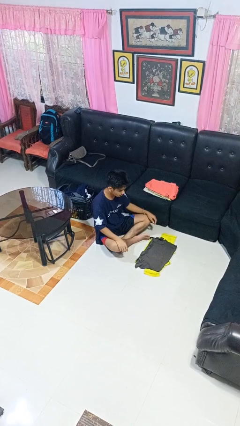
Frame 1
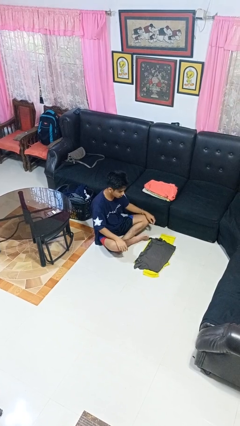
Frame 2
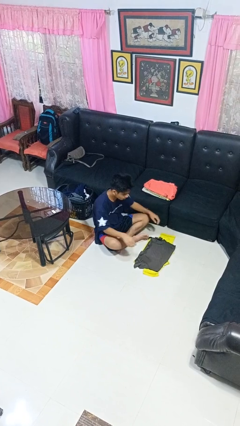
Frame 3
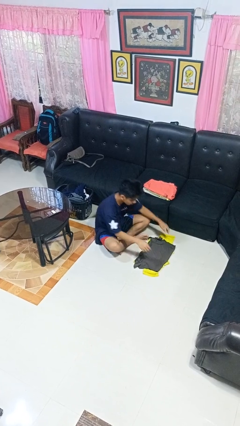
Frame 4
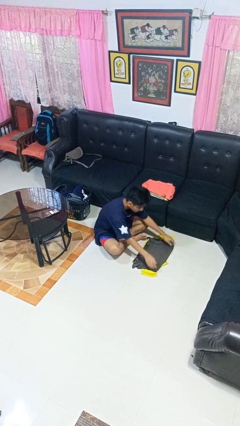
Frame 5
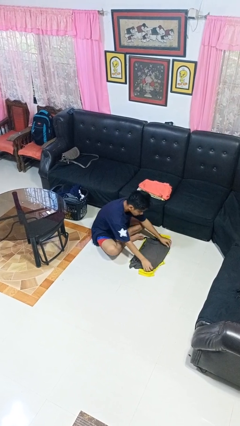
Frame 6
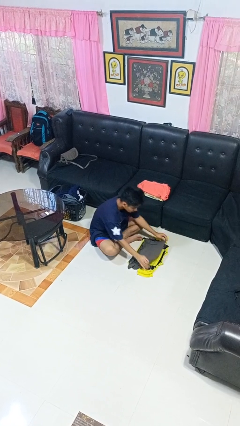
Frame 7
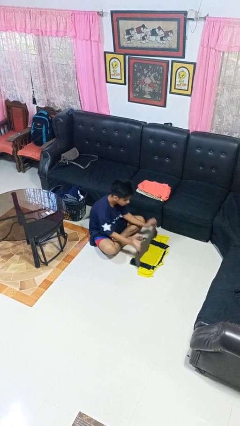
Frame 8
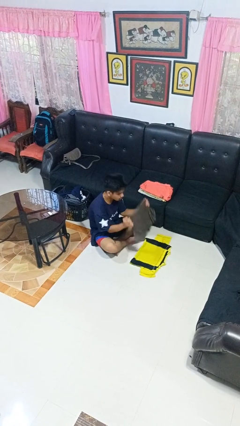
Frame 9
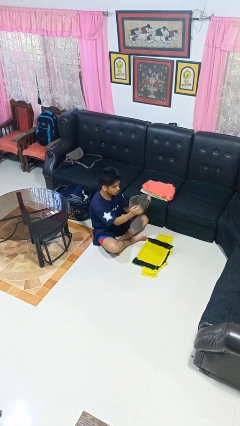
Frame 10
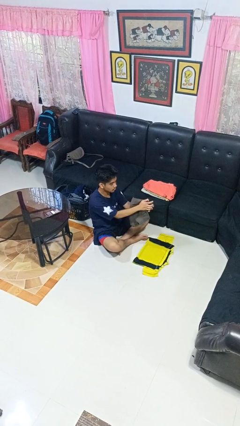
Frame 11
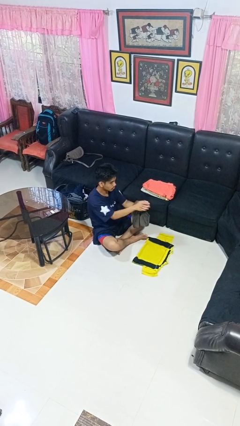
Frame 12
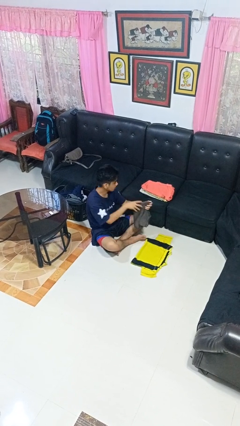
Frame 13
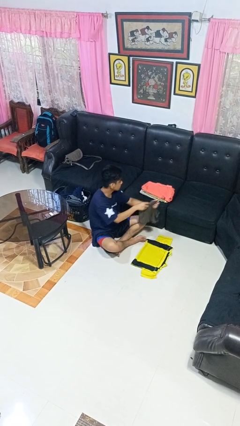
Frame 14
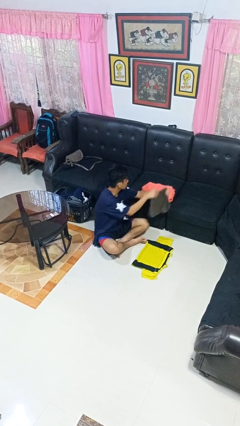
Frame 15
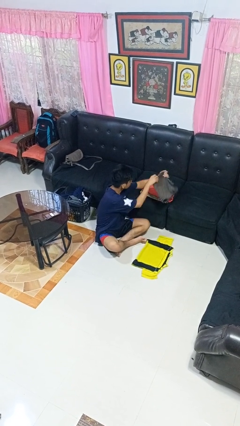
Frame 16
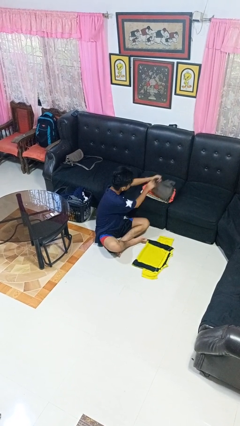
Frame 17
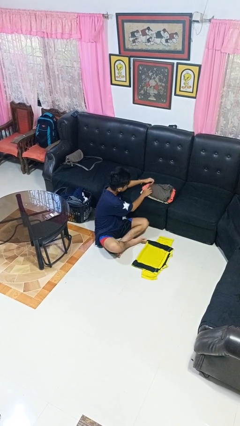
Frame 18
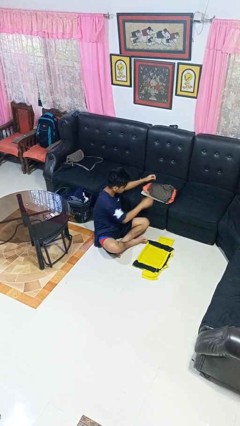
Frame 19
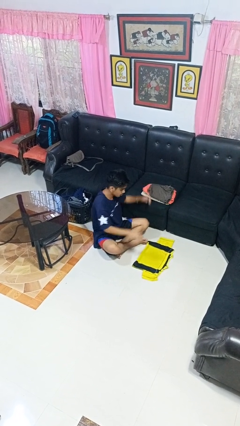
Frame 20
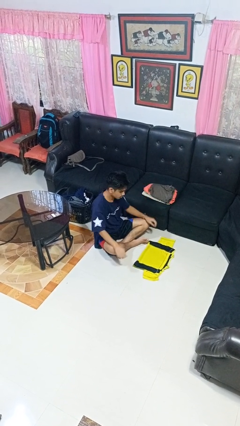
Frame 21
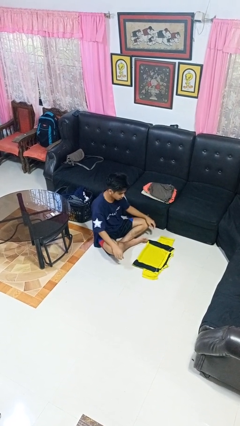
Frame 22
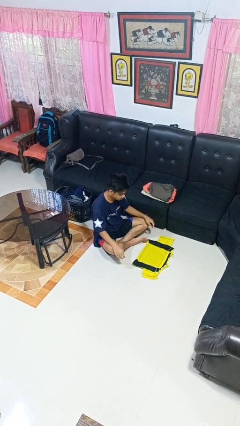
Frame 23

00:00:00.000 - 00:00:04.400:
person folds shirt

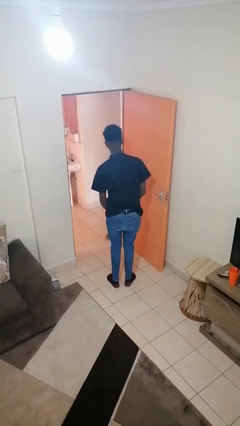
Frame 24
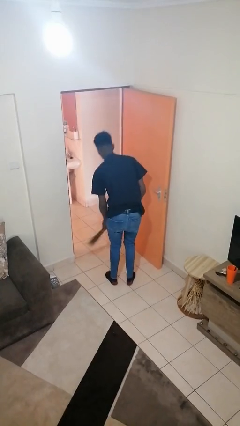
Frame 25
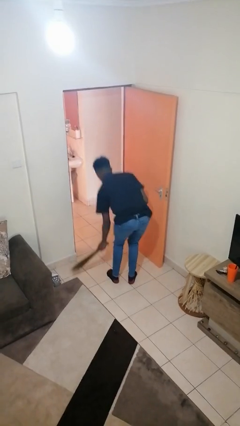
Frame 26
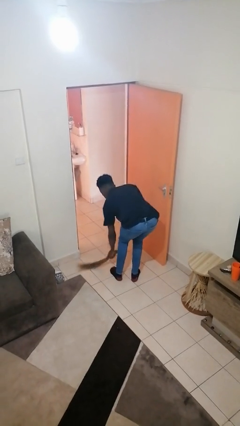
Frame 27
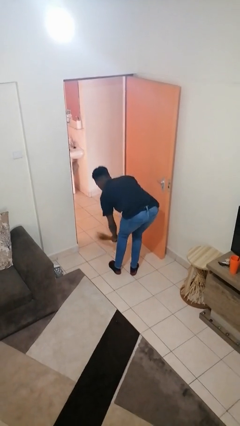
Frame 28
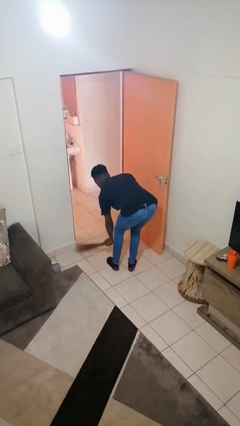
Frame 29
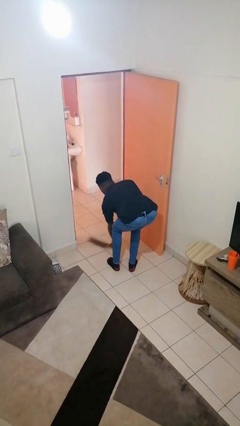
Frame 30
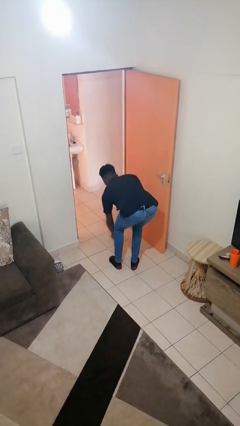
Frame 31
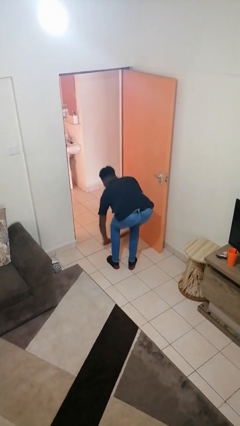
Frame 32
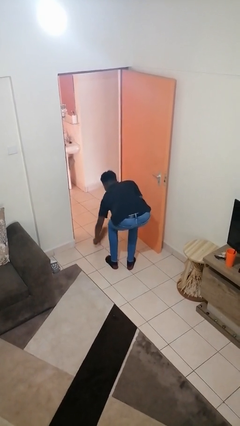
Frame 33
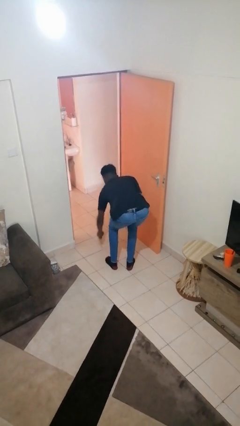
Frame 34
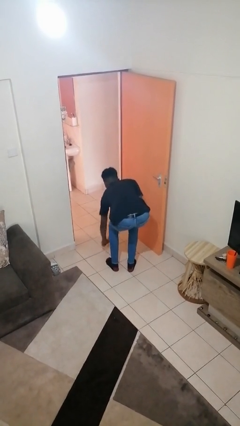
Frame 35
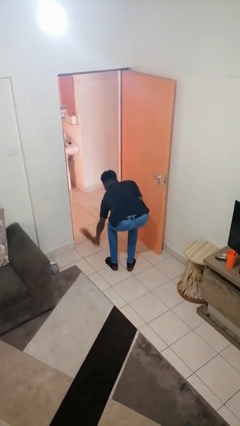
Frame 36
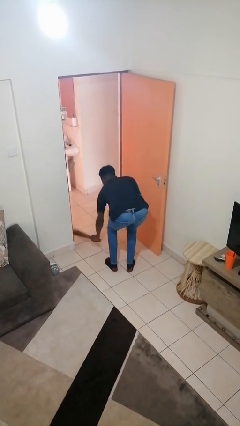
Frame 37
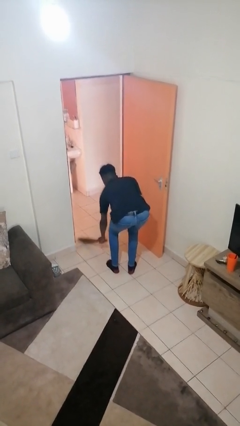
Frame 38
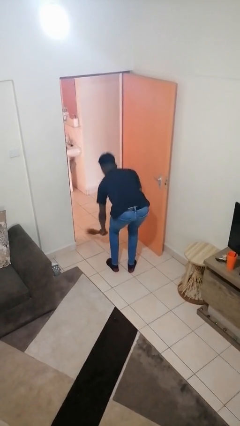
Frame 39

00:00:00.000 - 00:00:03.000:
person sweeps floor

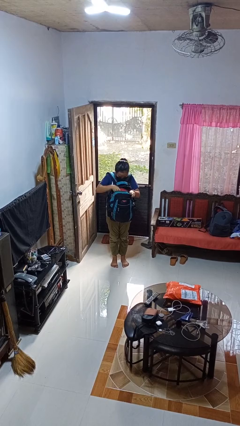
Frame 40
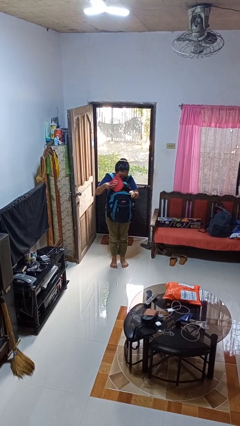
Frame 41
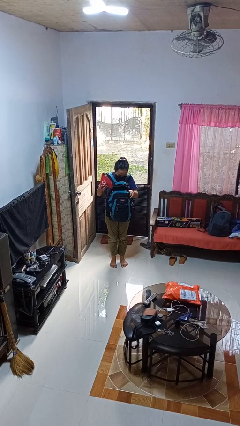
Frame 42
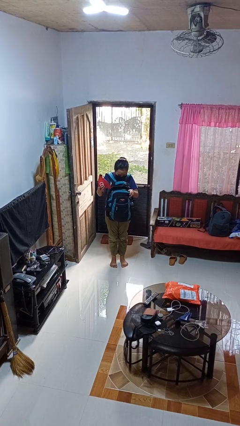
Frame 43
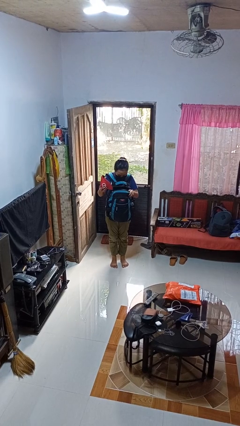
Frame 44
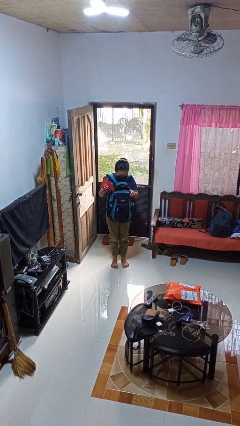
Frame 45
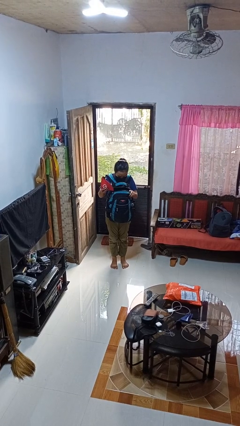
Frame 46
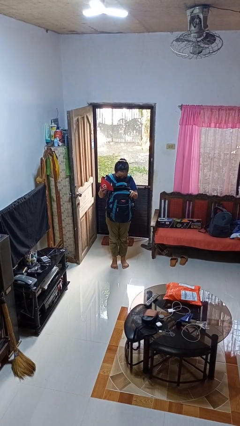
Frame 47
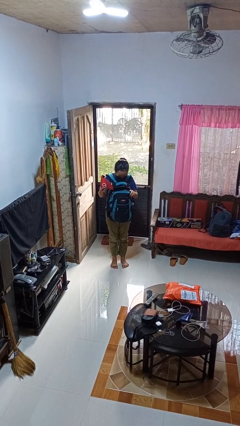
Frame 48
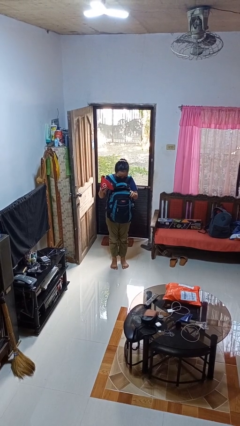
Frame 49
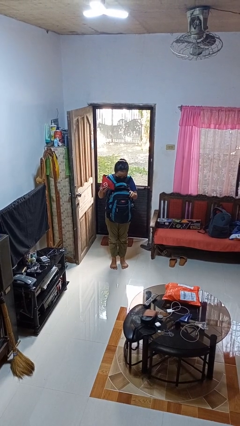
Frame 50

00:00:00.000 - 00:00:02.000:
person takes object from backpack

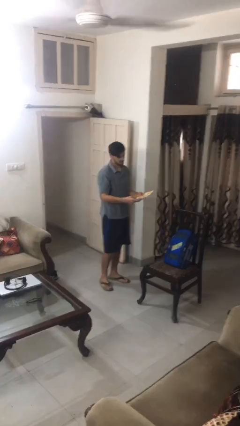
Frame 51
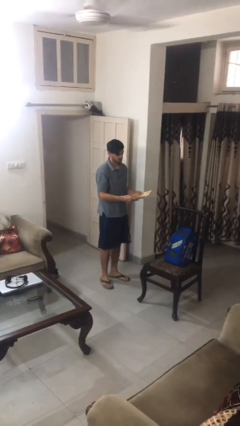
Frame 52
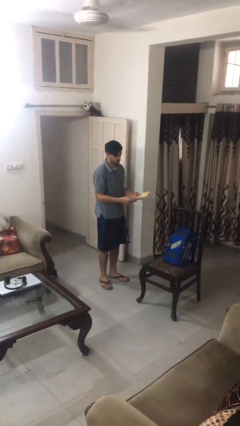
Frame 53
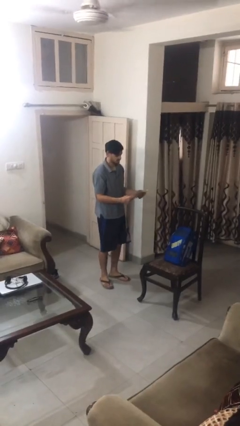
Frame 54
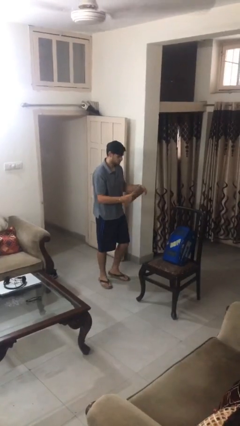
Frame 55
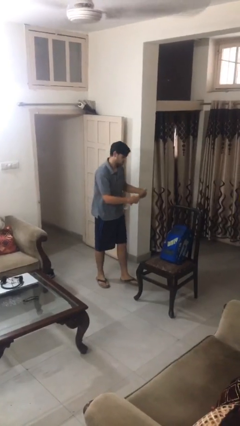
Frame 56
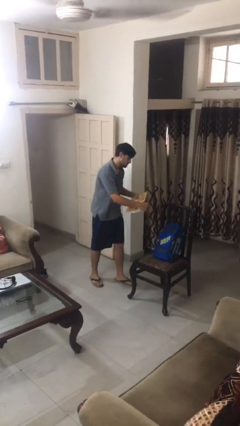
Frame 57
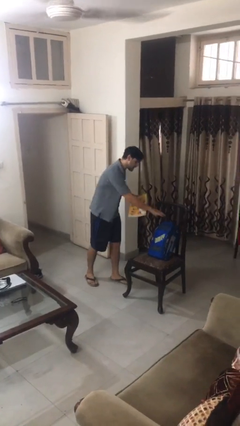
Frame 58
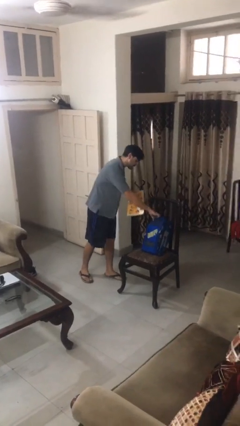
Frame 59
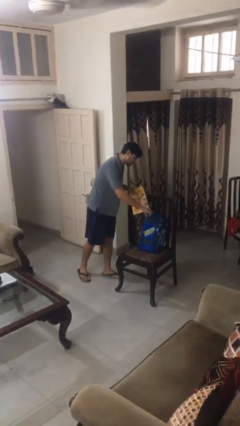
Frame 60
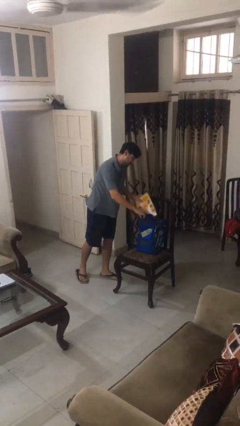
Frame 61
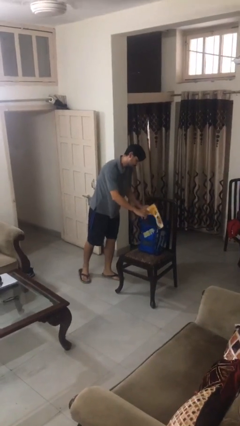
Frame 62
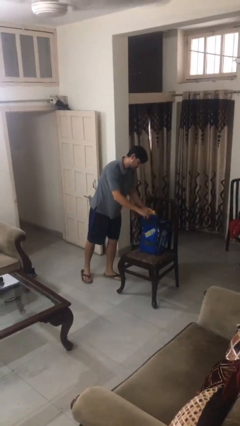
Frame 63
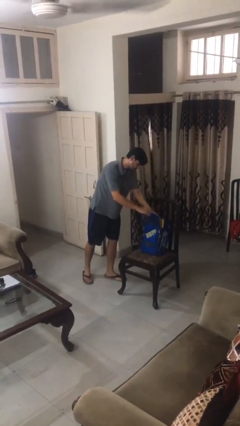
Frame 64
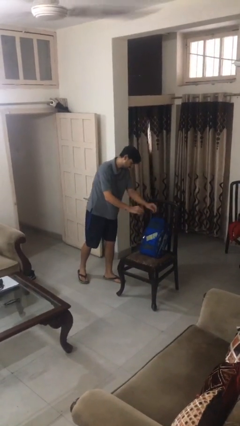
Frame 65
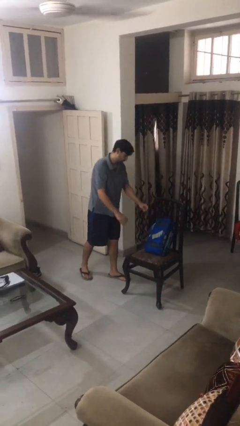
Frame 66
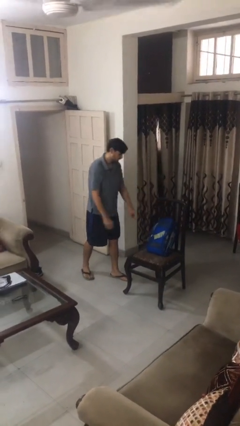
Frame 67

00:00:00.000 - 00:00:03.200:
person puts object into backpack

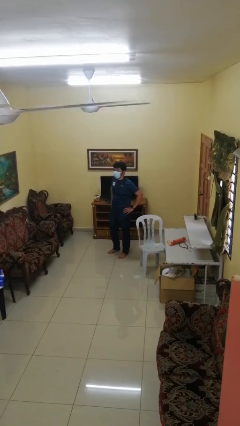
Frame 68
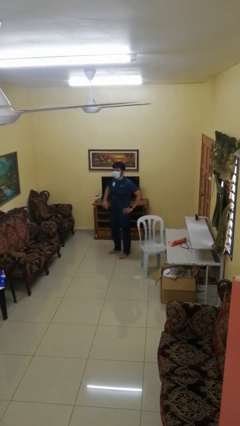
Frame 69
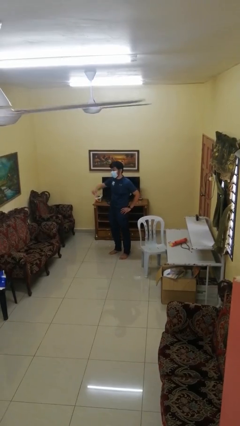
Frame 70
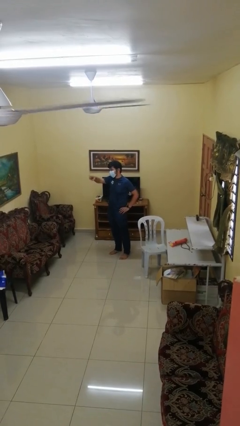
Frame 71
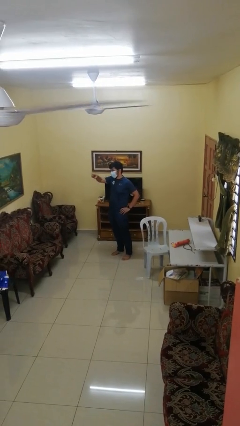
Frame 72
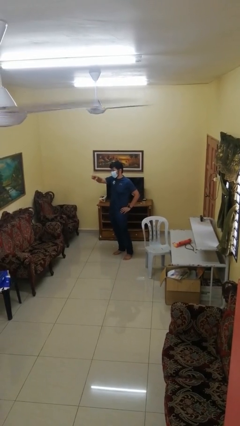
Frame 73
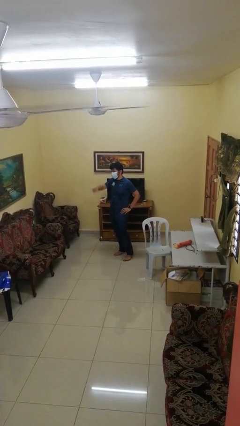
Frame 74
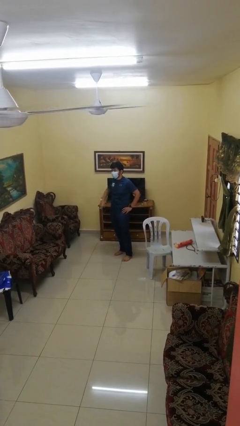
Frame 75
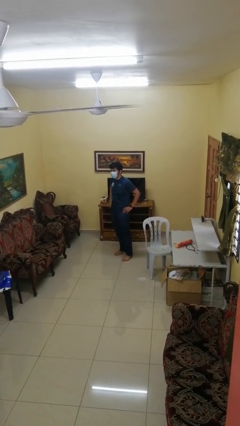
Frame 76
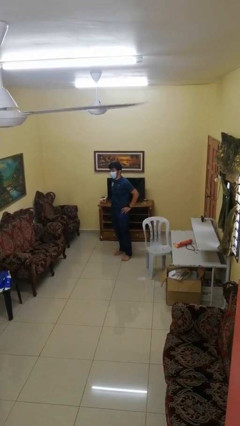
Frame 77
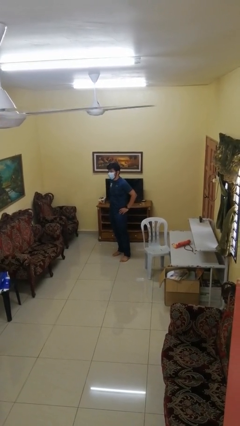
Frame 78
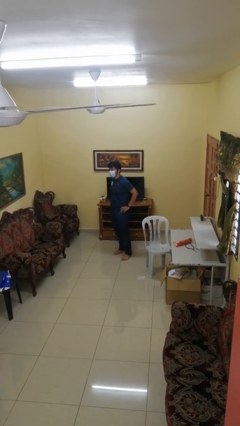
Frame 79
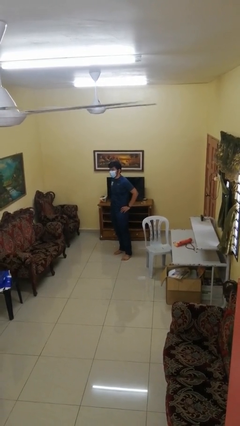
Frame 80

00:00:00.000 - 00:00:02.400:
person points at person

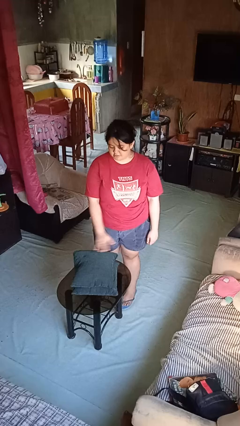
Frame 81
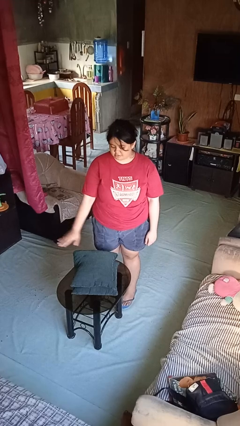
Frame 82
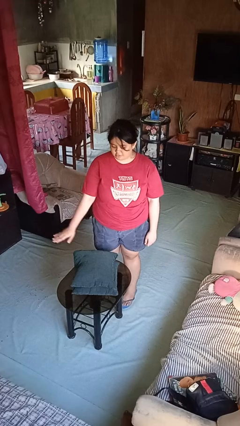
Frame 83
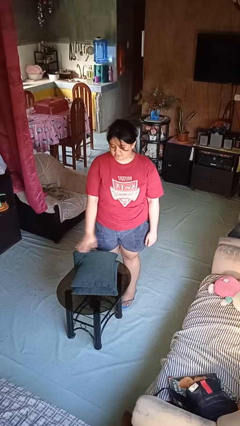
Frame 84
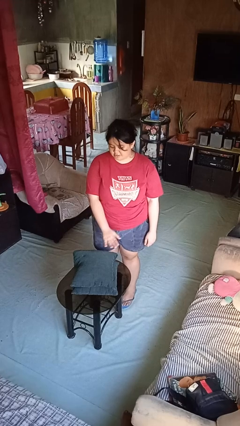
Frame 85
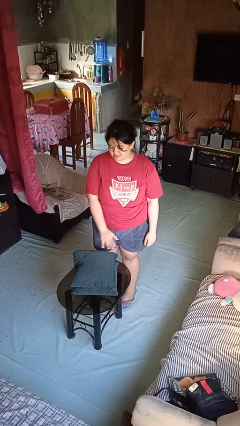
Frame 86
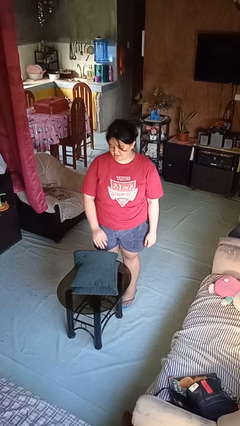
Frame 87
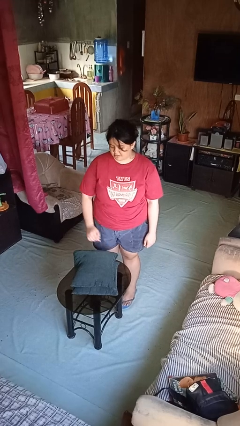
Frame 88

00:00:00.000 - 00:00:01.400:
person waves hand over object

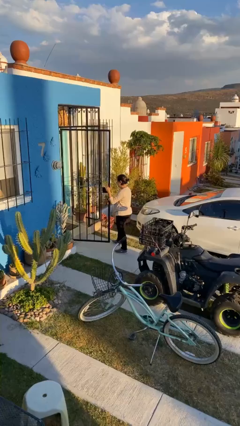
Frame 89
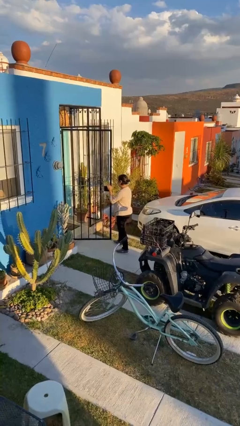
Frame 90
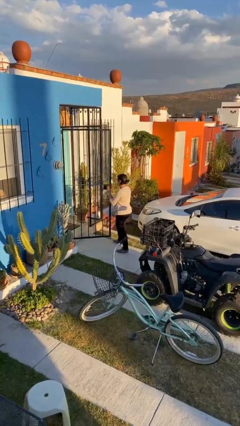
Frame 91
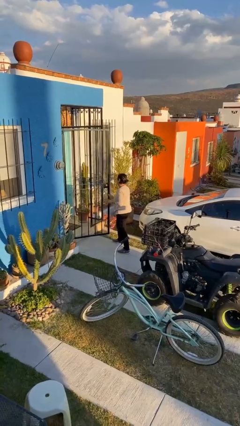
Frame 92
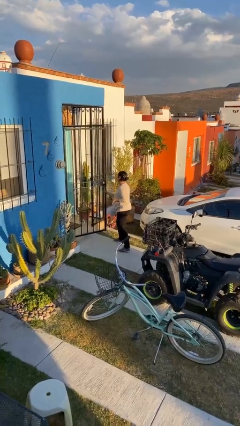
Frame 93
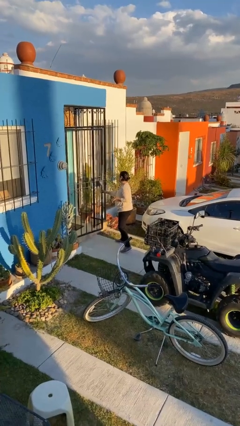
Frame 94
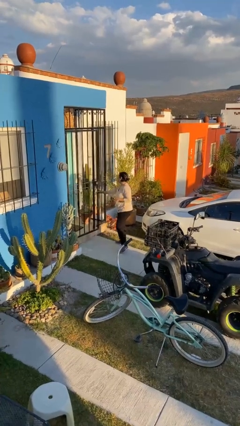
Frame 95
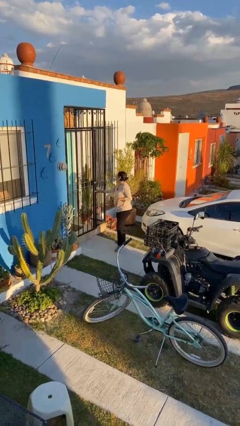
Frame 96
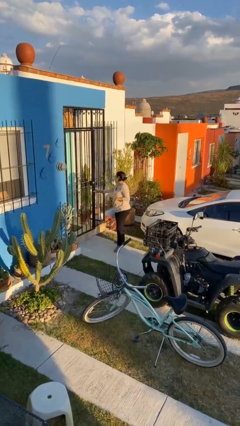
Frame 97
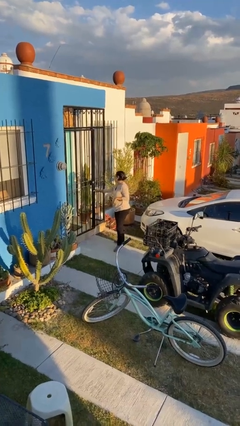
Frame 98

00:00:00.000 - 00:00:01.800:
person closes facility door
